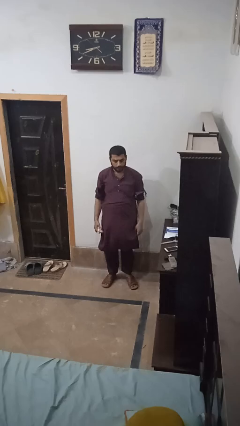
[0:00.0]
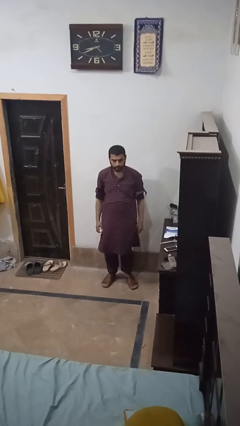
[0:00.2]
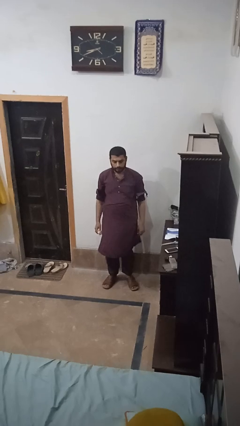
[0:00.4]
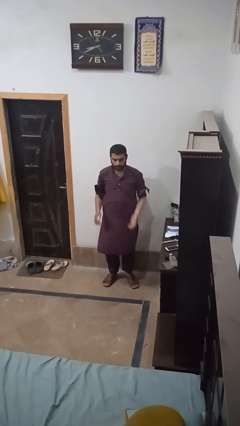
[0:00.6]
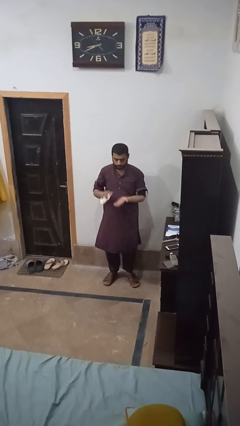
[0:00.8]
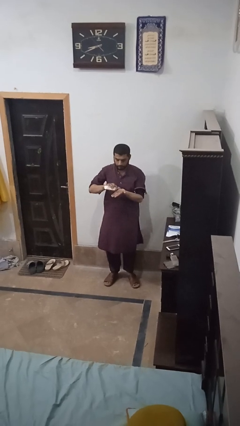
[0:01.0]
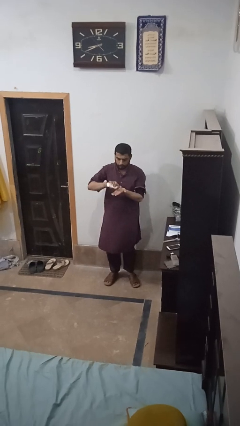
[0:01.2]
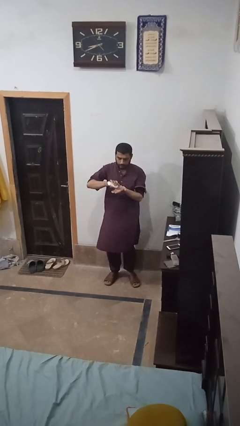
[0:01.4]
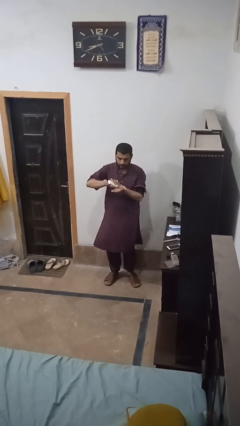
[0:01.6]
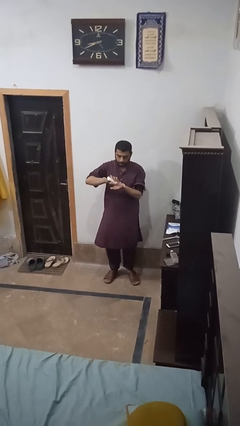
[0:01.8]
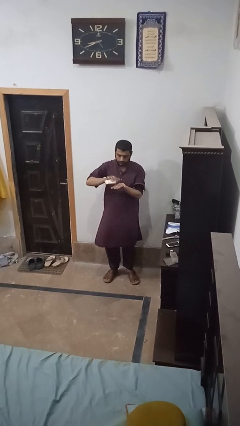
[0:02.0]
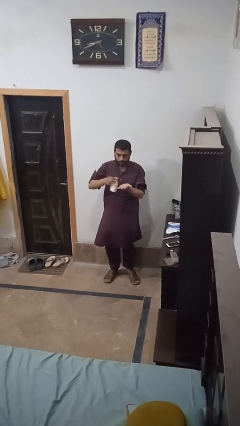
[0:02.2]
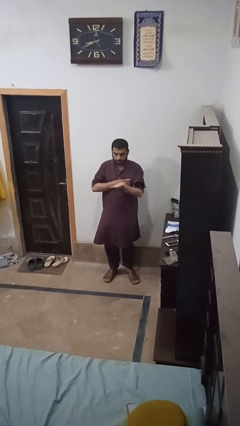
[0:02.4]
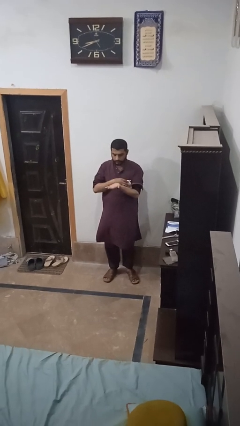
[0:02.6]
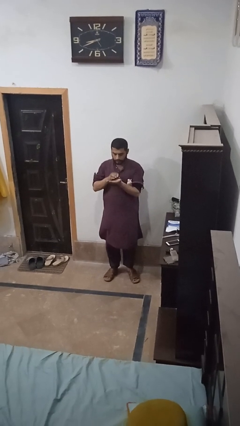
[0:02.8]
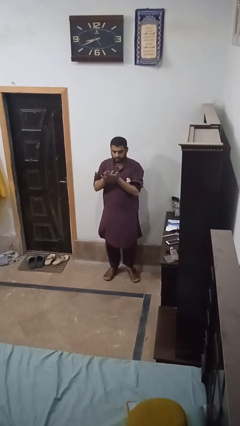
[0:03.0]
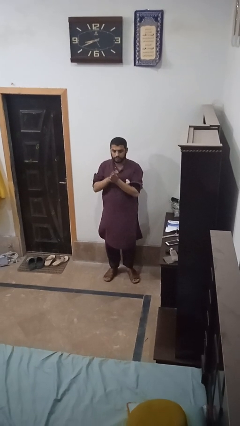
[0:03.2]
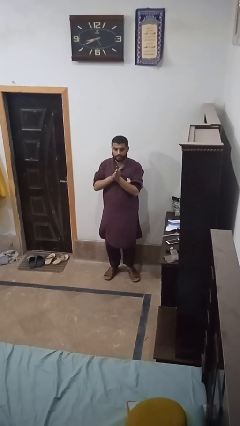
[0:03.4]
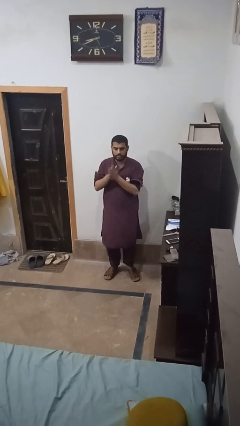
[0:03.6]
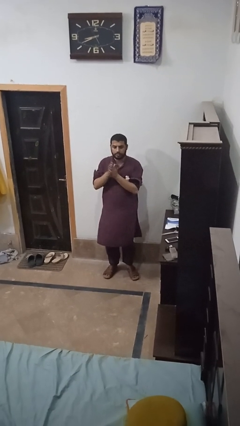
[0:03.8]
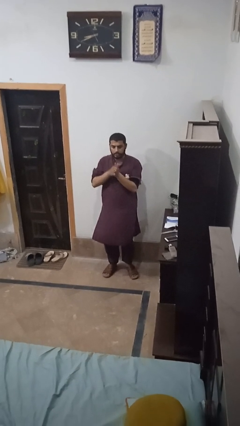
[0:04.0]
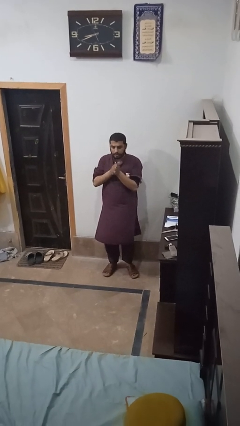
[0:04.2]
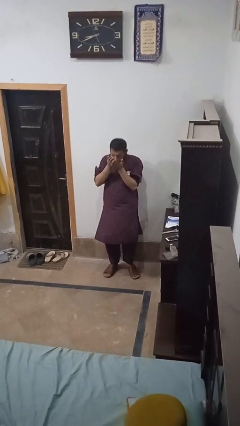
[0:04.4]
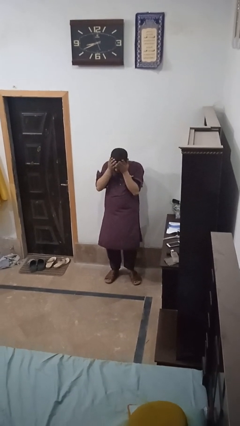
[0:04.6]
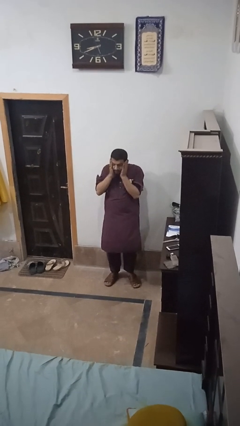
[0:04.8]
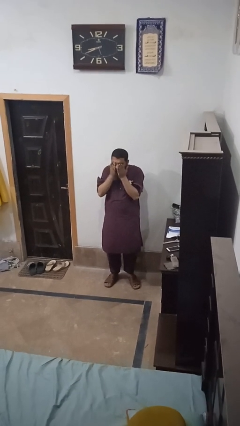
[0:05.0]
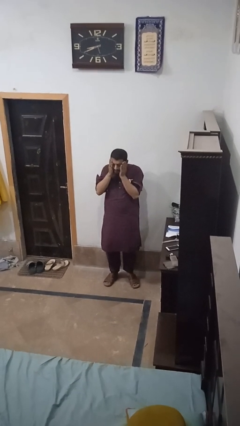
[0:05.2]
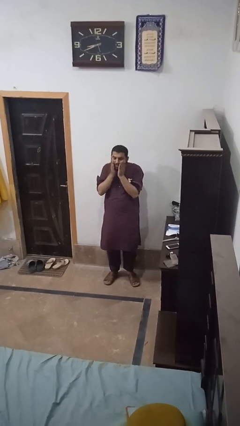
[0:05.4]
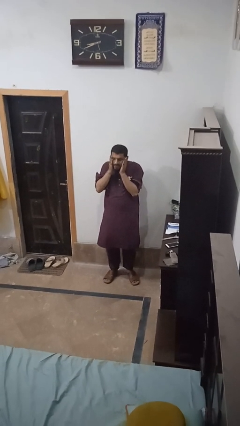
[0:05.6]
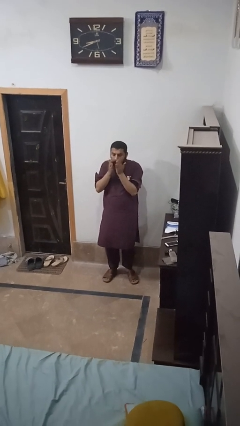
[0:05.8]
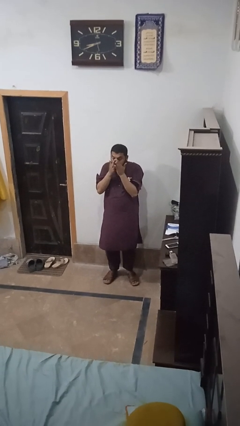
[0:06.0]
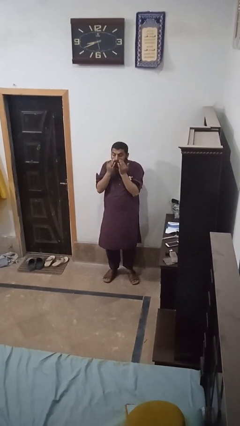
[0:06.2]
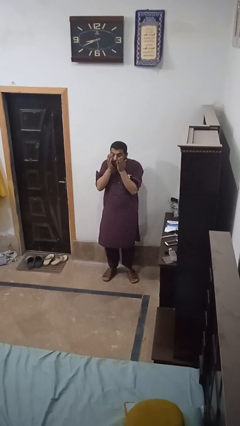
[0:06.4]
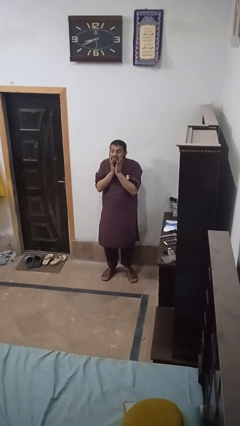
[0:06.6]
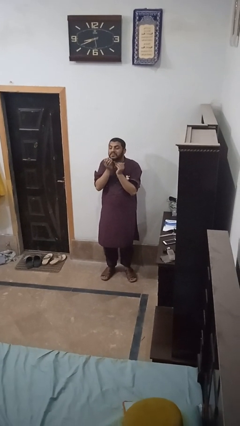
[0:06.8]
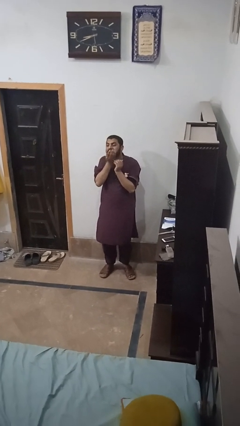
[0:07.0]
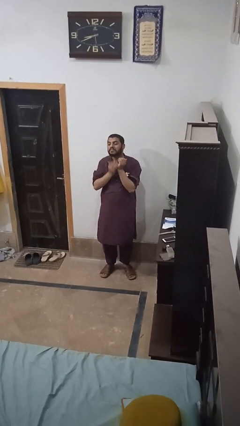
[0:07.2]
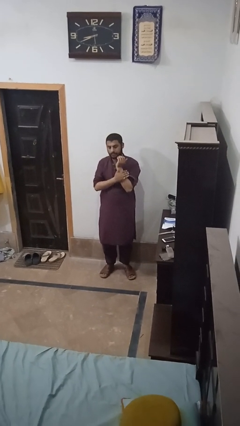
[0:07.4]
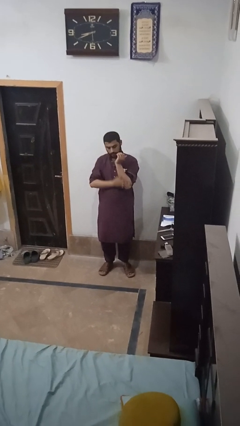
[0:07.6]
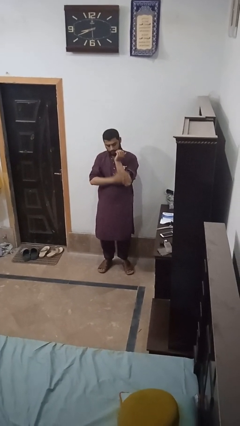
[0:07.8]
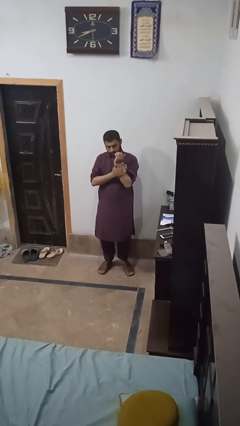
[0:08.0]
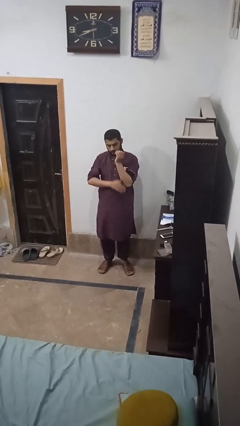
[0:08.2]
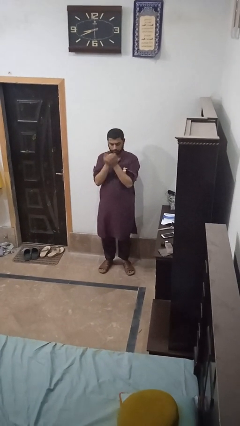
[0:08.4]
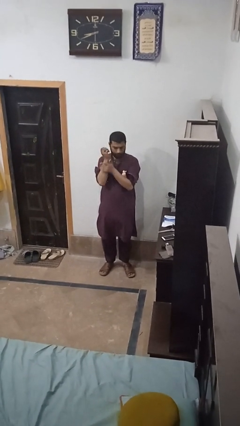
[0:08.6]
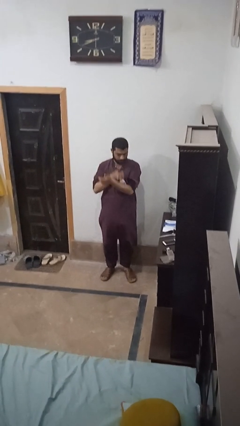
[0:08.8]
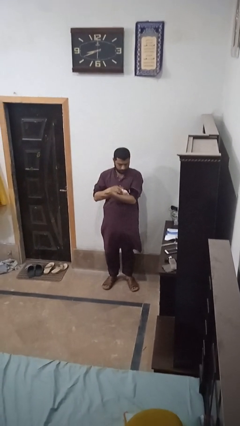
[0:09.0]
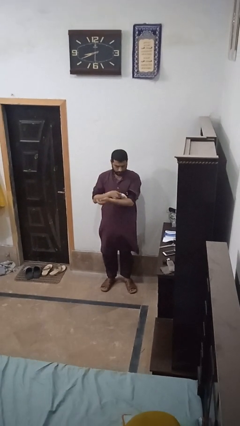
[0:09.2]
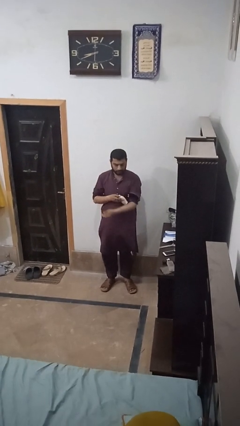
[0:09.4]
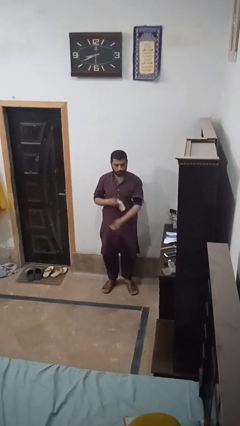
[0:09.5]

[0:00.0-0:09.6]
person applies sunscreen

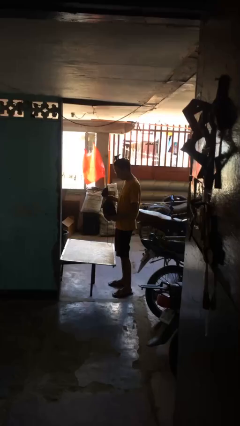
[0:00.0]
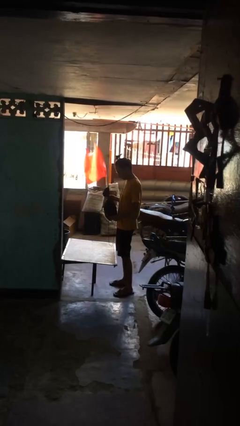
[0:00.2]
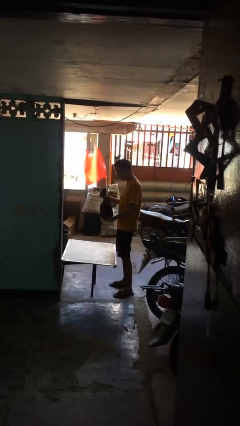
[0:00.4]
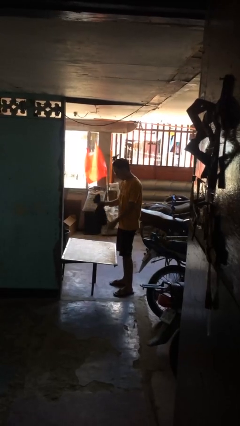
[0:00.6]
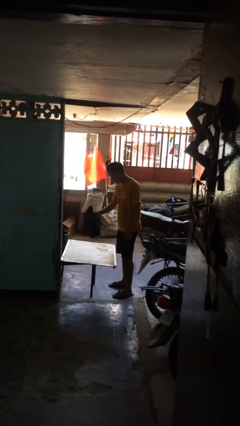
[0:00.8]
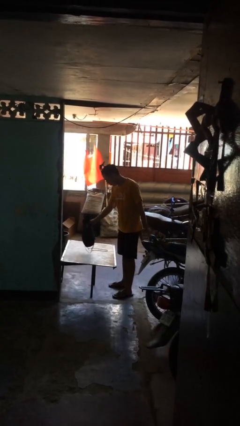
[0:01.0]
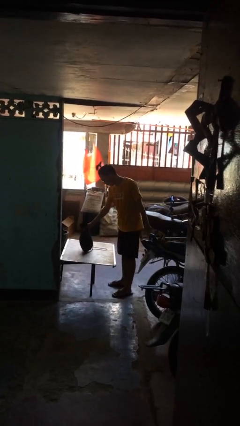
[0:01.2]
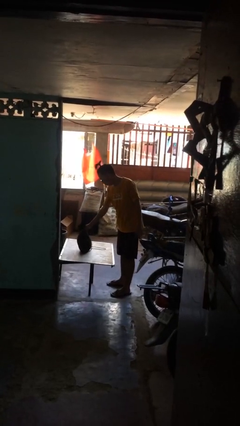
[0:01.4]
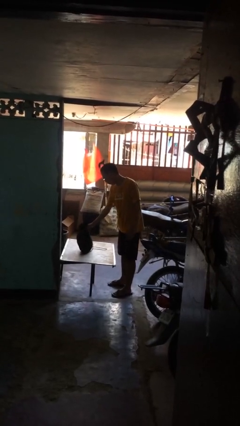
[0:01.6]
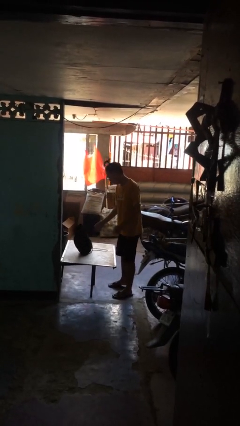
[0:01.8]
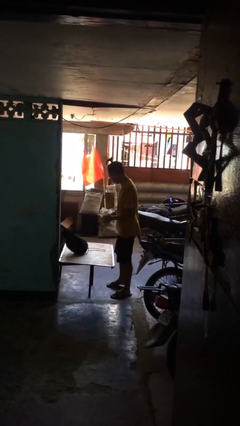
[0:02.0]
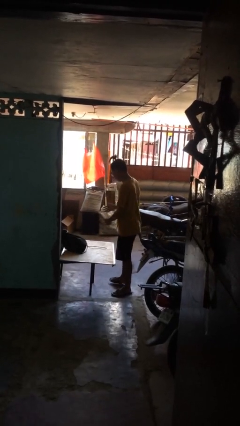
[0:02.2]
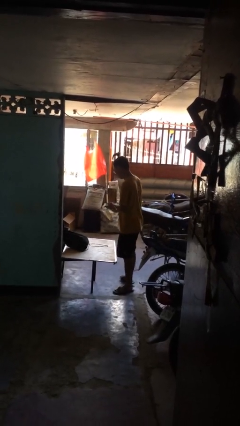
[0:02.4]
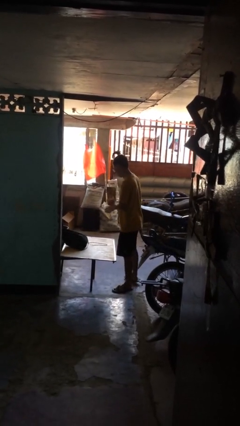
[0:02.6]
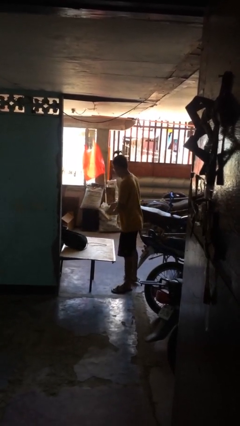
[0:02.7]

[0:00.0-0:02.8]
person puts down object on table

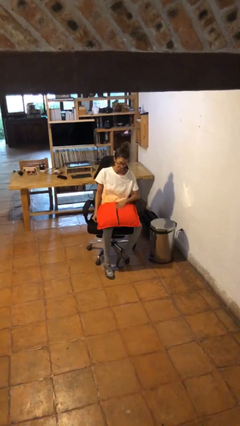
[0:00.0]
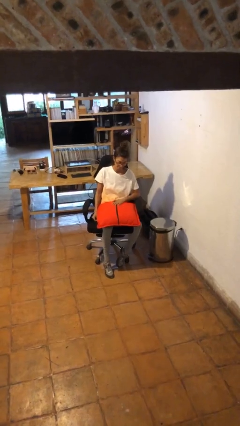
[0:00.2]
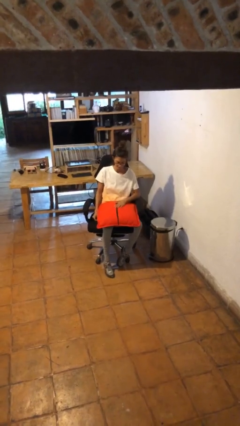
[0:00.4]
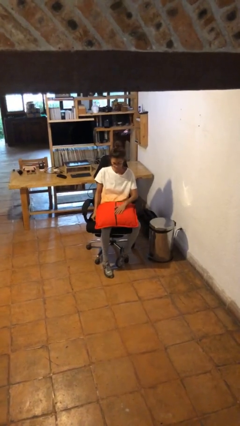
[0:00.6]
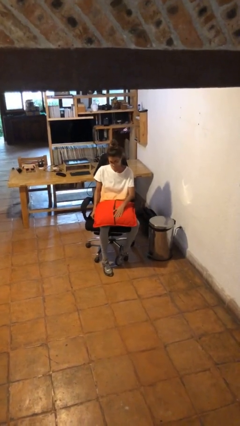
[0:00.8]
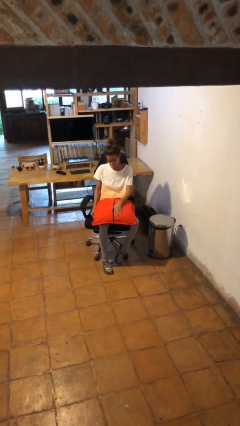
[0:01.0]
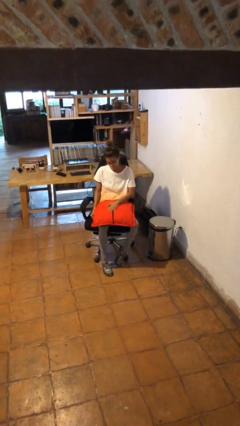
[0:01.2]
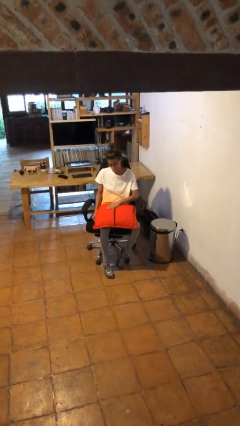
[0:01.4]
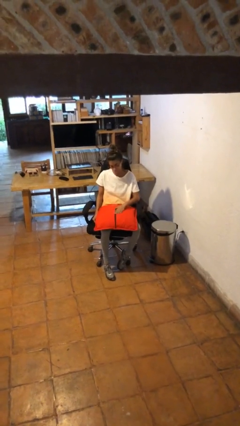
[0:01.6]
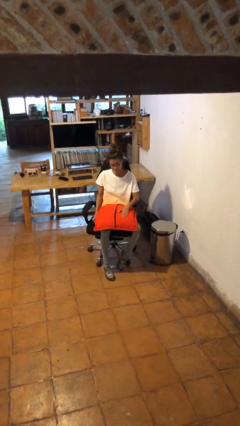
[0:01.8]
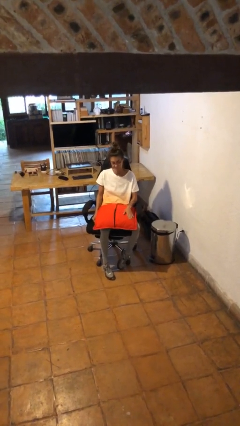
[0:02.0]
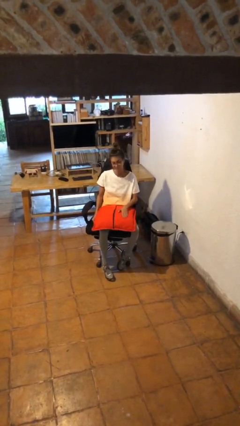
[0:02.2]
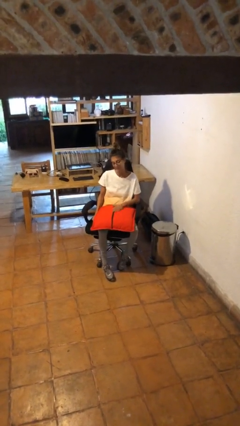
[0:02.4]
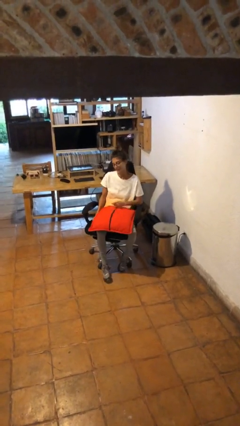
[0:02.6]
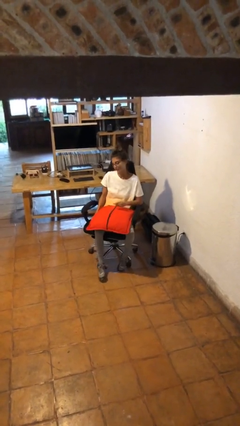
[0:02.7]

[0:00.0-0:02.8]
person waves hand over object

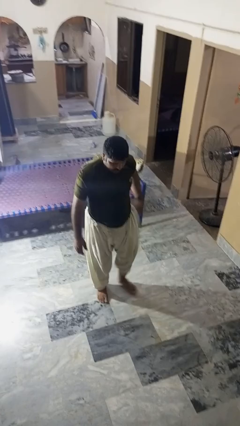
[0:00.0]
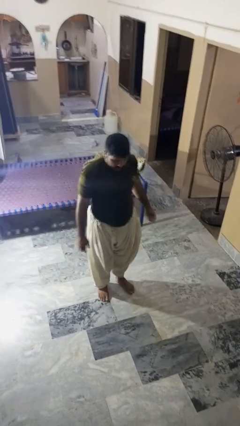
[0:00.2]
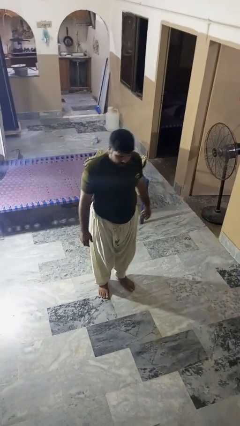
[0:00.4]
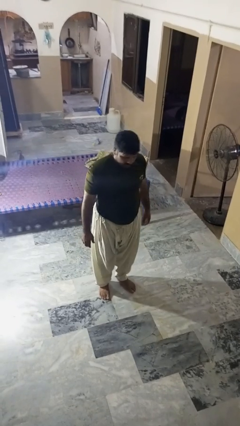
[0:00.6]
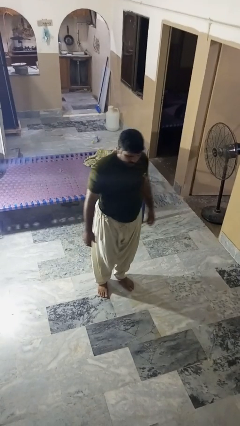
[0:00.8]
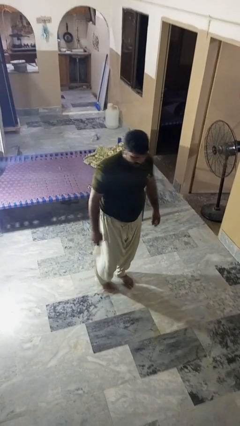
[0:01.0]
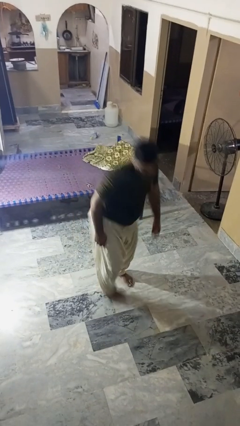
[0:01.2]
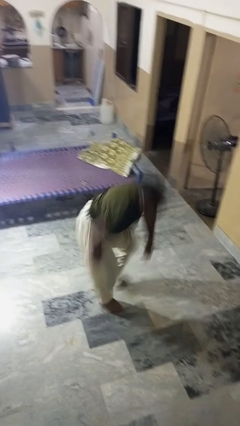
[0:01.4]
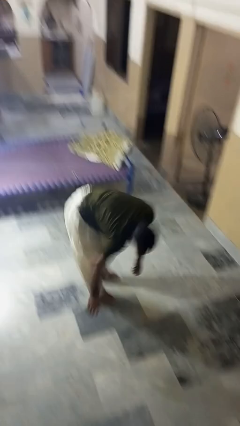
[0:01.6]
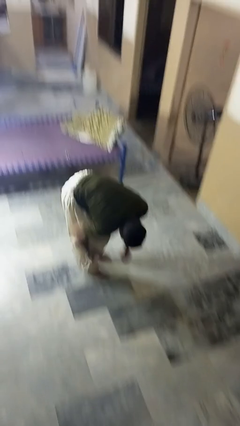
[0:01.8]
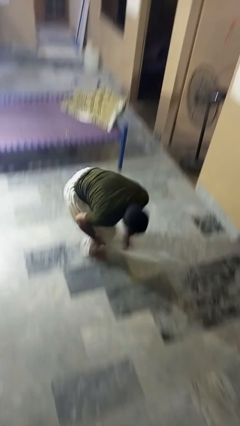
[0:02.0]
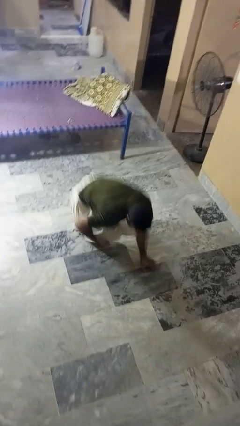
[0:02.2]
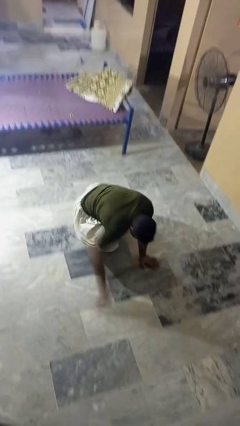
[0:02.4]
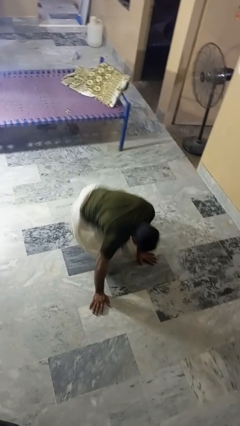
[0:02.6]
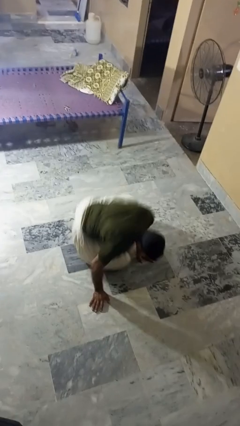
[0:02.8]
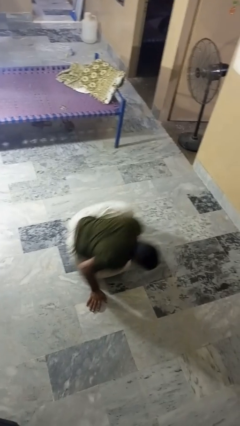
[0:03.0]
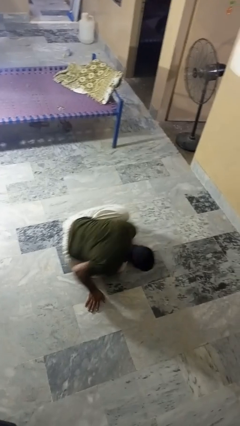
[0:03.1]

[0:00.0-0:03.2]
person falls while standing
